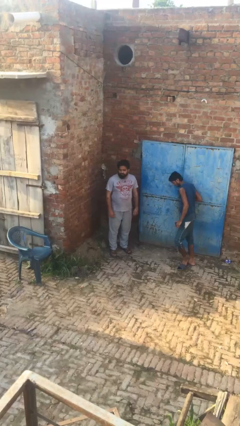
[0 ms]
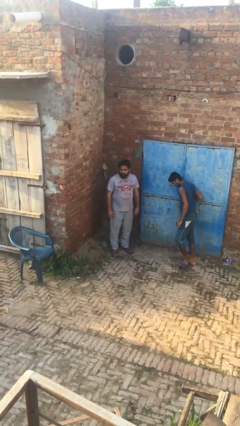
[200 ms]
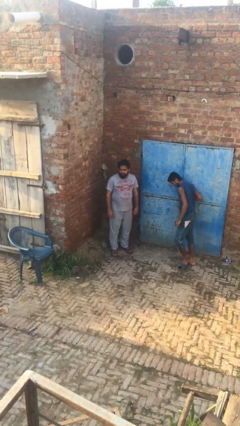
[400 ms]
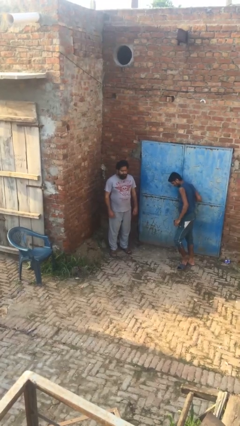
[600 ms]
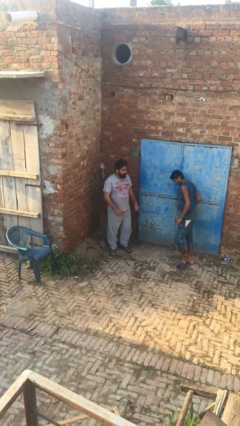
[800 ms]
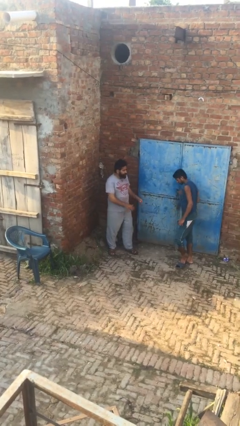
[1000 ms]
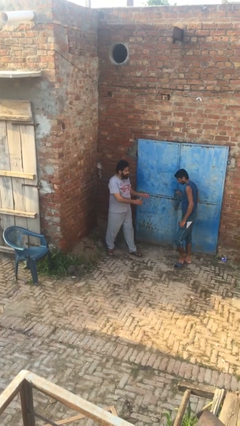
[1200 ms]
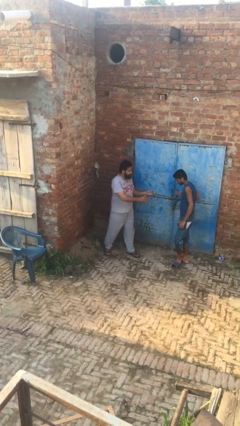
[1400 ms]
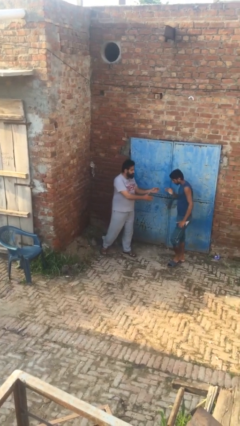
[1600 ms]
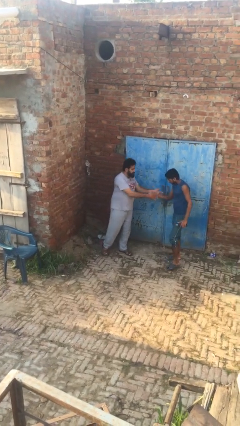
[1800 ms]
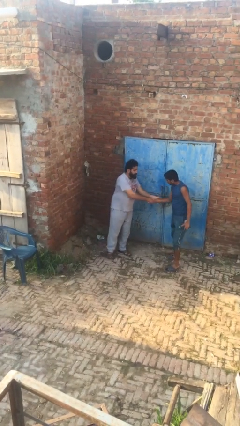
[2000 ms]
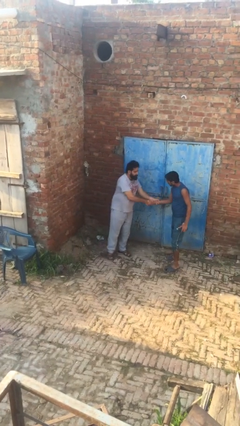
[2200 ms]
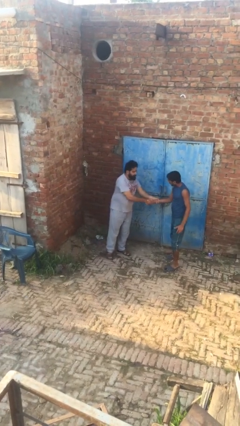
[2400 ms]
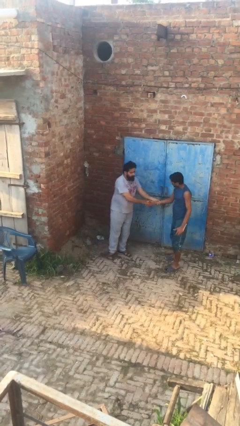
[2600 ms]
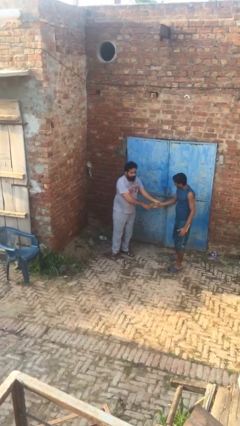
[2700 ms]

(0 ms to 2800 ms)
person shakes hand

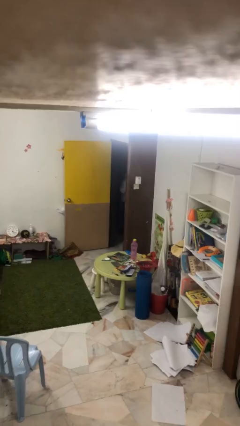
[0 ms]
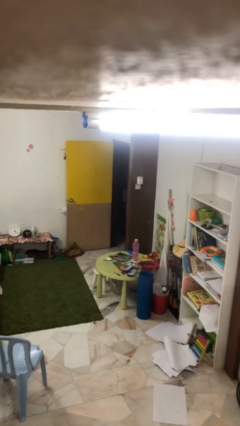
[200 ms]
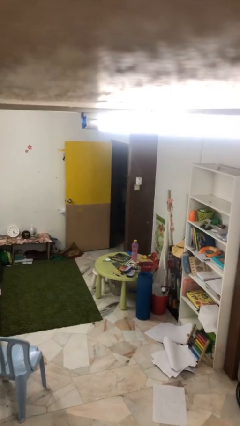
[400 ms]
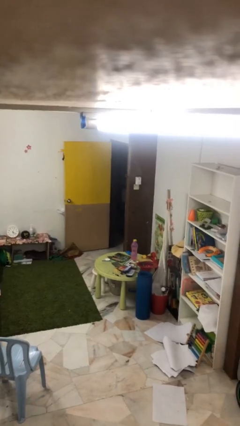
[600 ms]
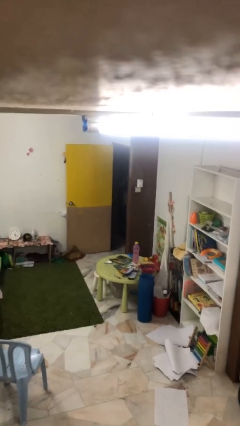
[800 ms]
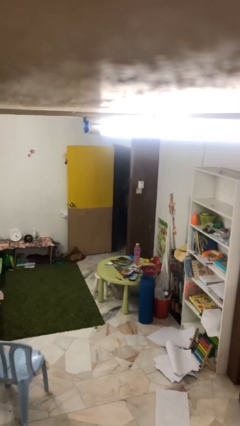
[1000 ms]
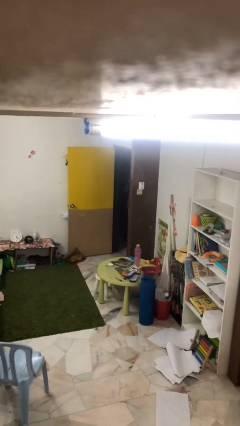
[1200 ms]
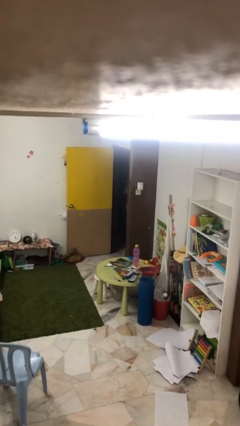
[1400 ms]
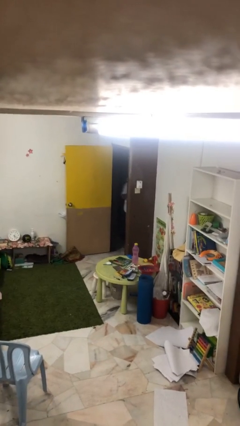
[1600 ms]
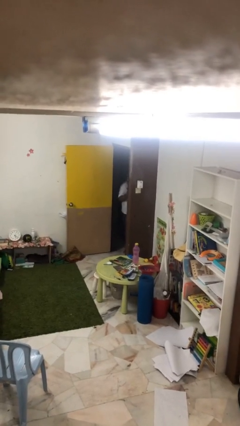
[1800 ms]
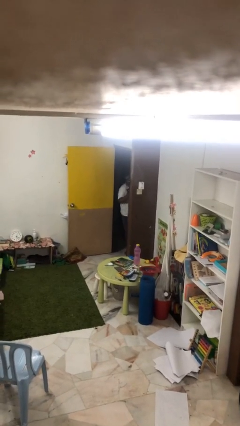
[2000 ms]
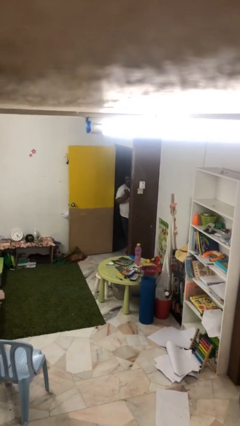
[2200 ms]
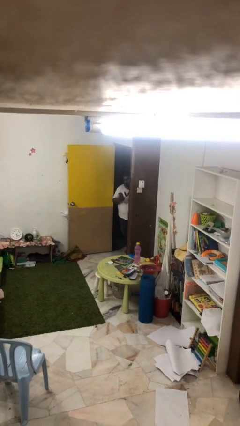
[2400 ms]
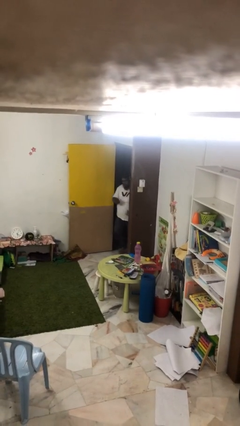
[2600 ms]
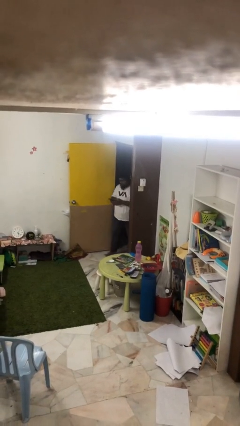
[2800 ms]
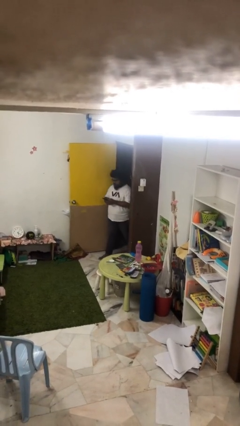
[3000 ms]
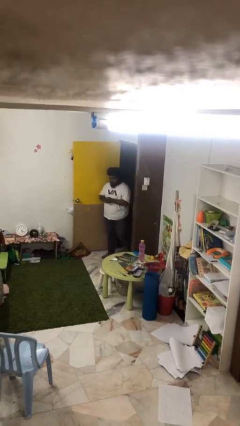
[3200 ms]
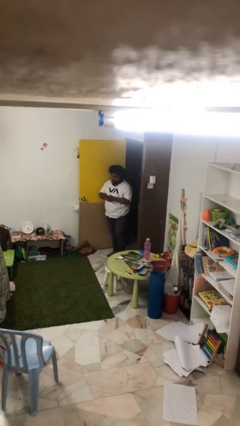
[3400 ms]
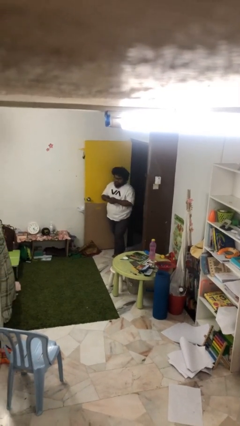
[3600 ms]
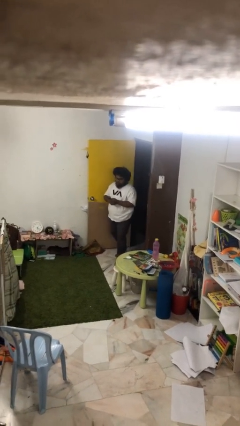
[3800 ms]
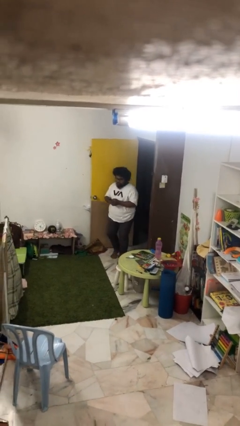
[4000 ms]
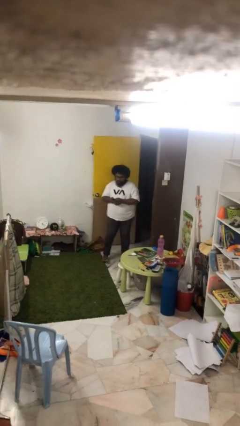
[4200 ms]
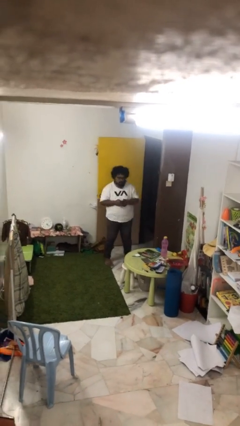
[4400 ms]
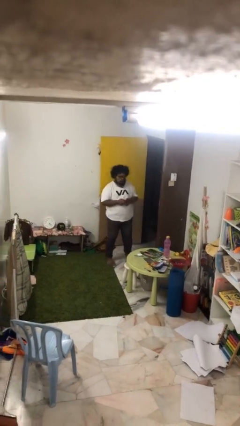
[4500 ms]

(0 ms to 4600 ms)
person enters scene through structure

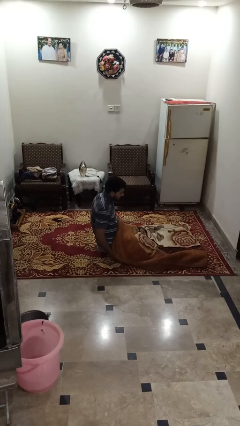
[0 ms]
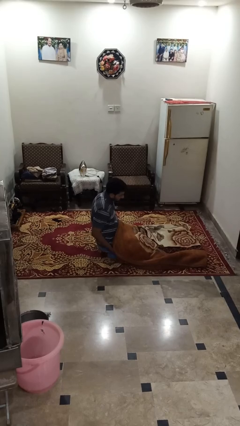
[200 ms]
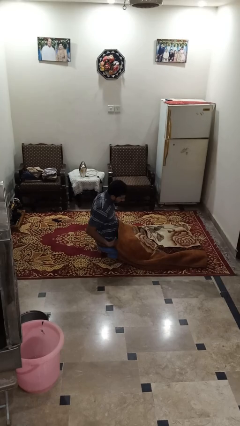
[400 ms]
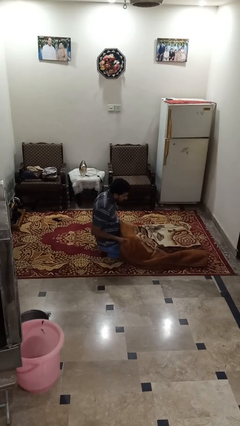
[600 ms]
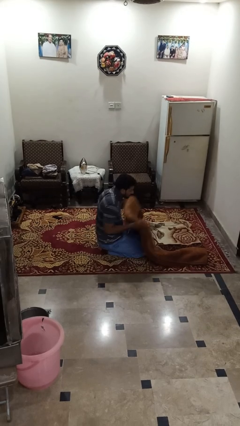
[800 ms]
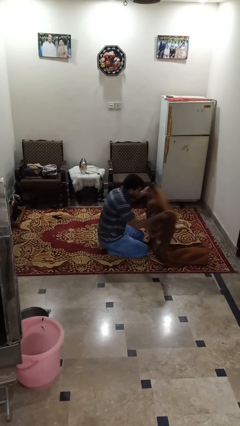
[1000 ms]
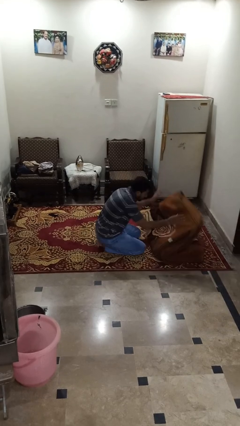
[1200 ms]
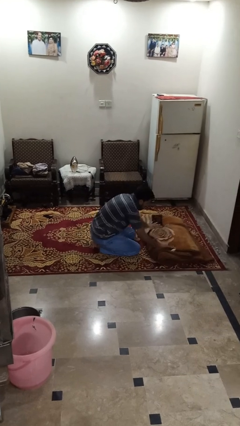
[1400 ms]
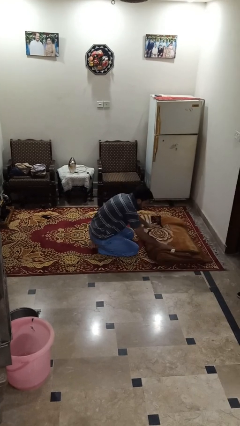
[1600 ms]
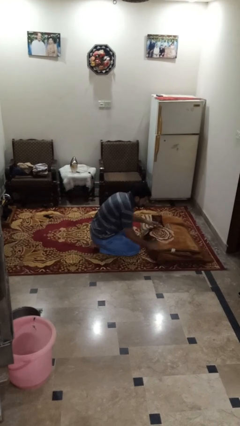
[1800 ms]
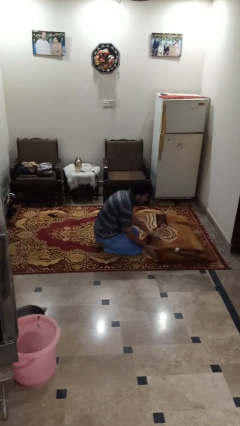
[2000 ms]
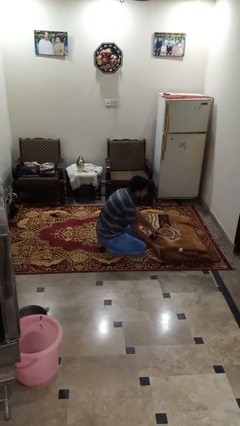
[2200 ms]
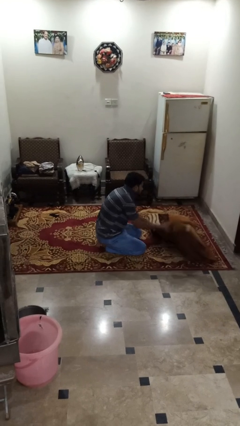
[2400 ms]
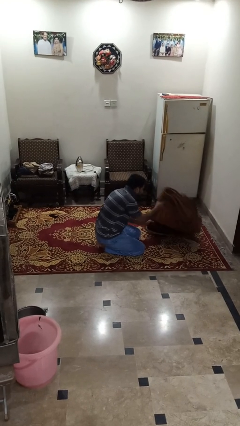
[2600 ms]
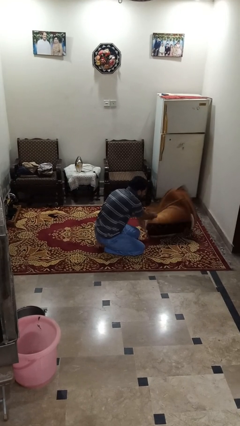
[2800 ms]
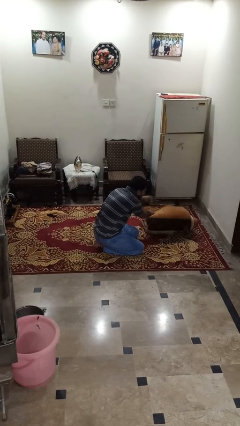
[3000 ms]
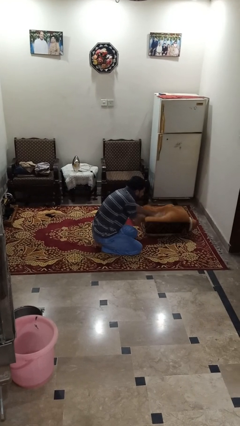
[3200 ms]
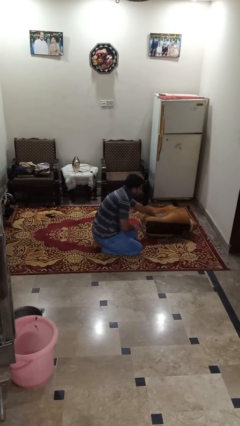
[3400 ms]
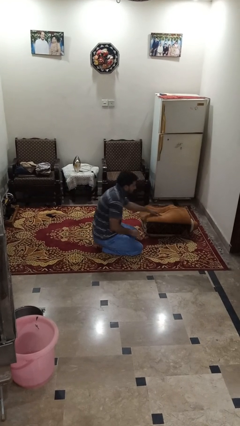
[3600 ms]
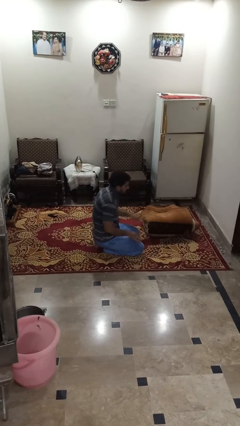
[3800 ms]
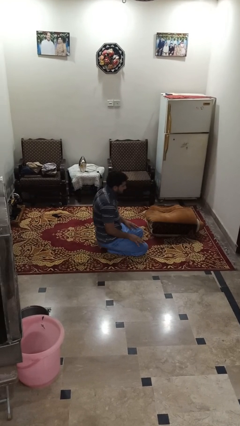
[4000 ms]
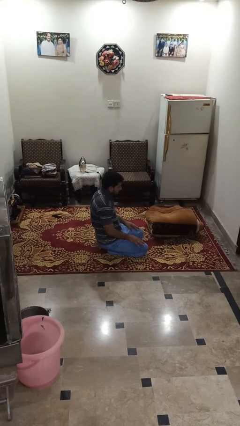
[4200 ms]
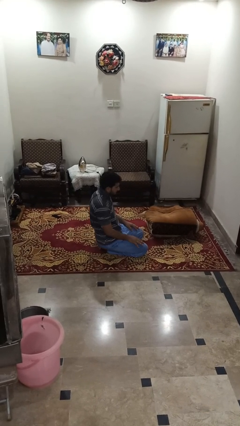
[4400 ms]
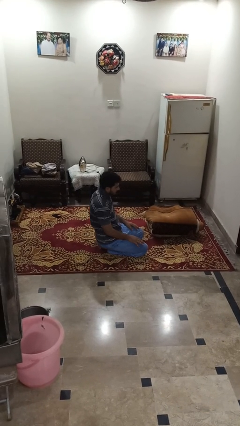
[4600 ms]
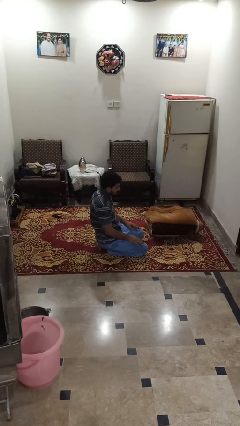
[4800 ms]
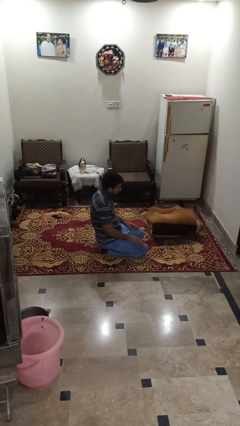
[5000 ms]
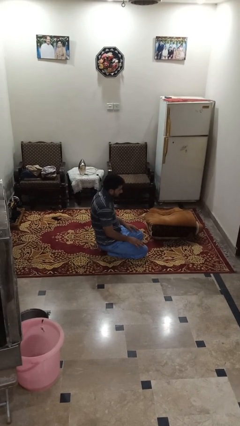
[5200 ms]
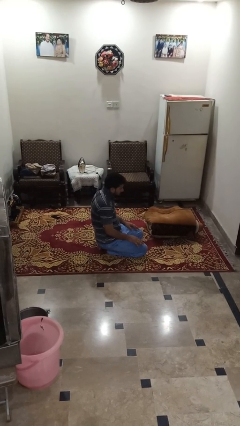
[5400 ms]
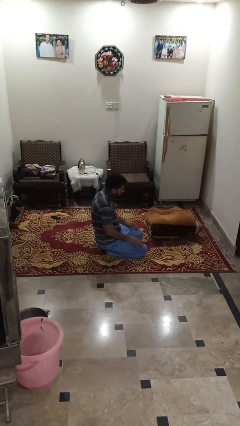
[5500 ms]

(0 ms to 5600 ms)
person folds blanket

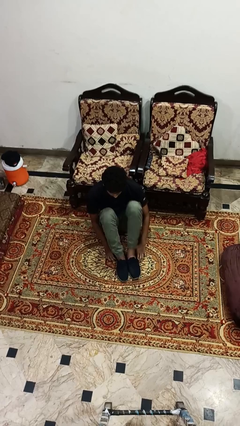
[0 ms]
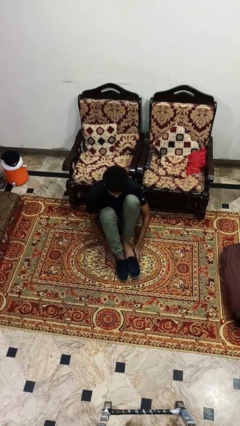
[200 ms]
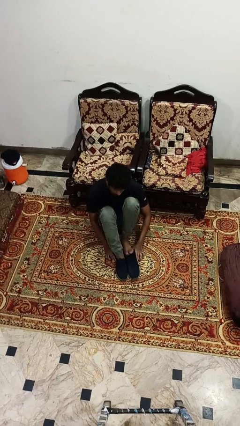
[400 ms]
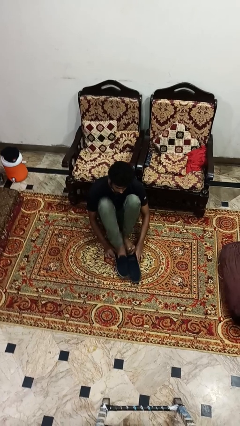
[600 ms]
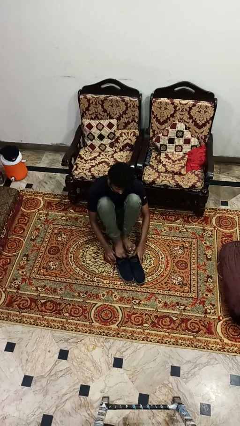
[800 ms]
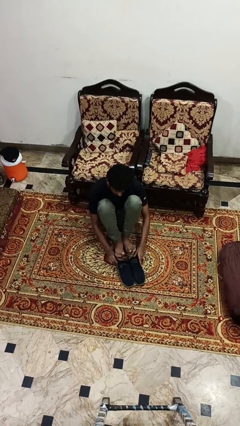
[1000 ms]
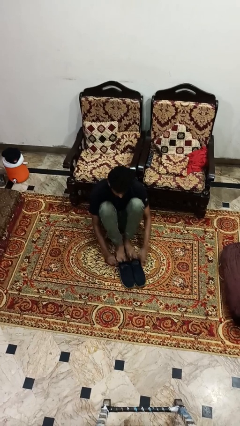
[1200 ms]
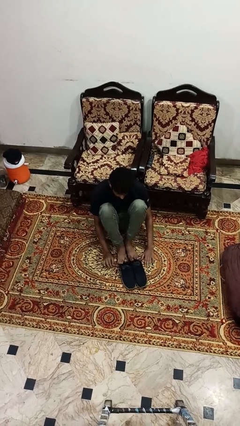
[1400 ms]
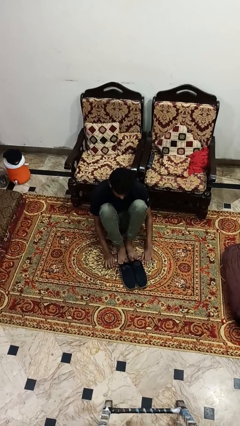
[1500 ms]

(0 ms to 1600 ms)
person takes off shoes

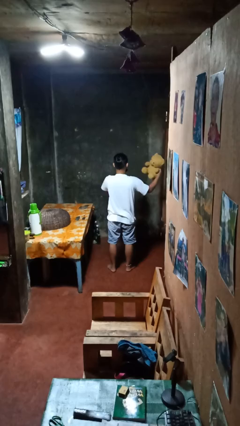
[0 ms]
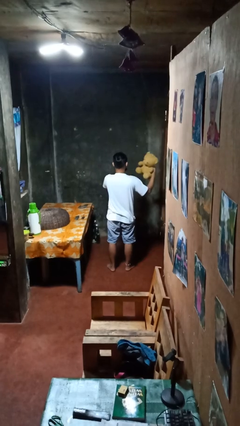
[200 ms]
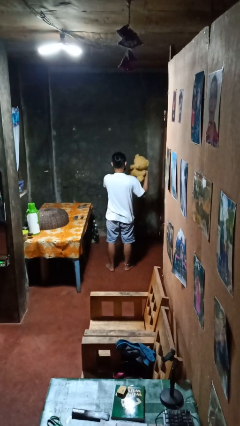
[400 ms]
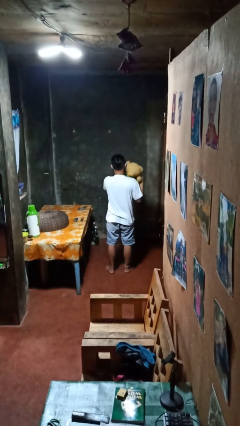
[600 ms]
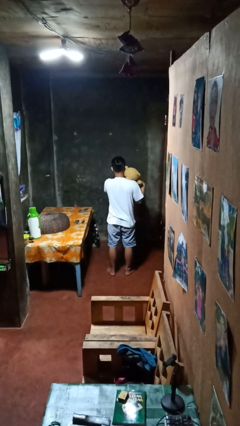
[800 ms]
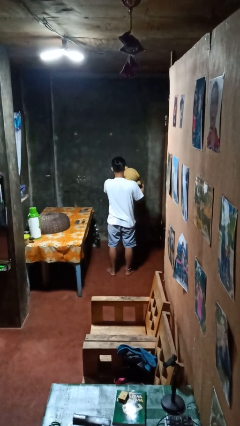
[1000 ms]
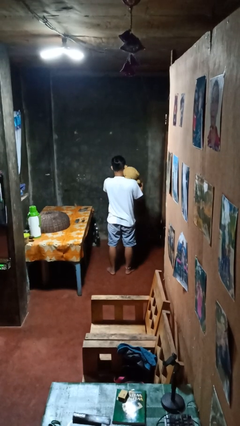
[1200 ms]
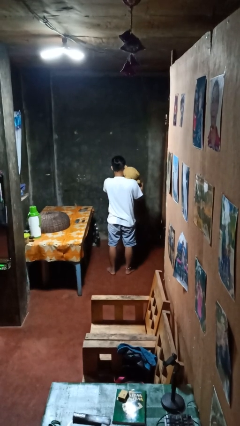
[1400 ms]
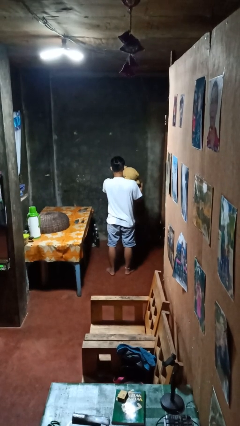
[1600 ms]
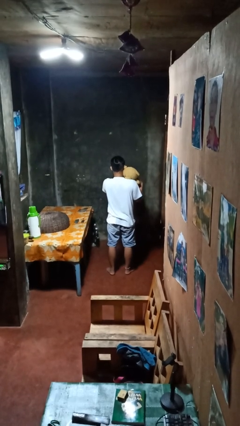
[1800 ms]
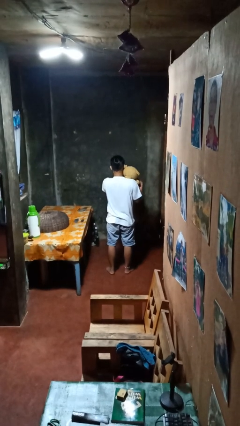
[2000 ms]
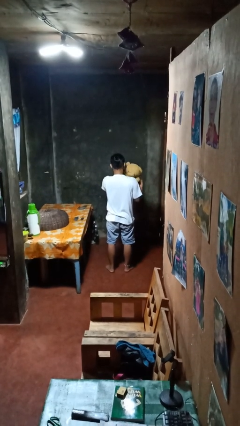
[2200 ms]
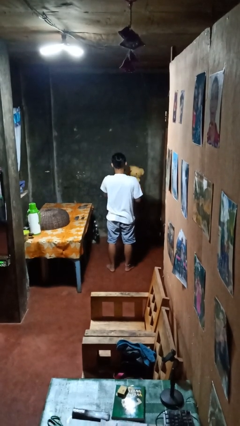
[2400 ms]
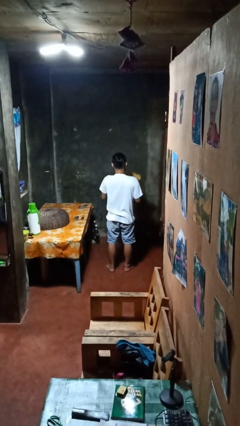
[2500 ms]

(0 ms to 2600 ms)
person hugs stuffed animal

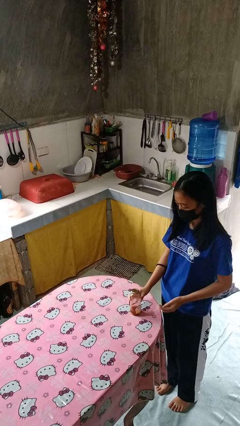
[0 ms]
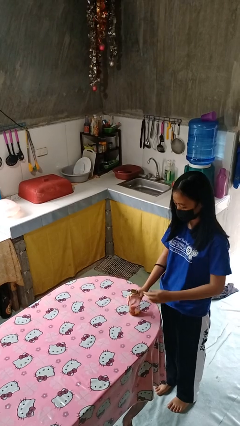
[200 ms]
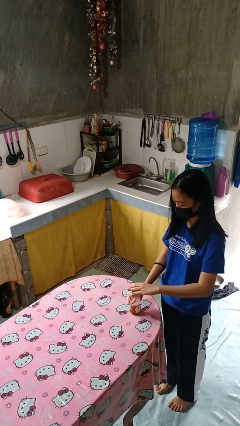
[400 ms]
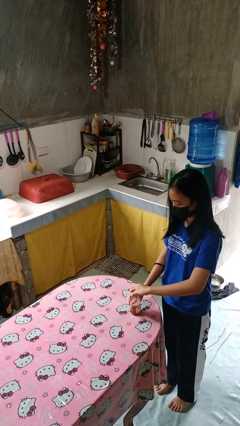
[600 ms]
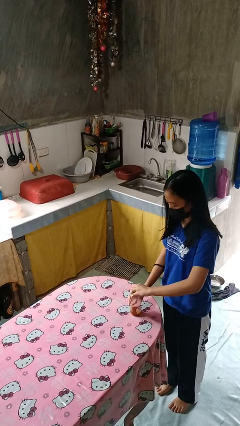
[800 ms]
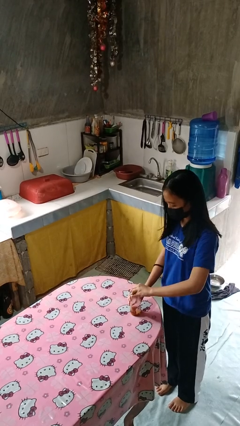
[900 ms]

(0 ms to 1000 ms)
person opens jar
